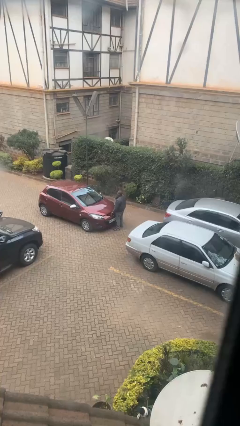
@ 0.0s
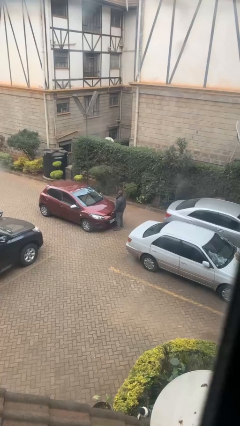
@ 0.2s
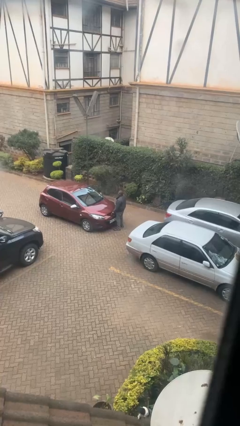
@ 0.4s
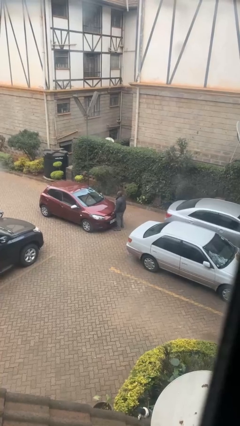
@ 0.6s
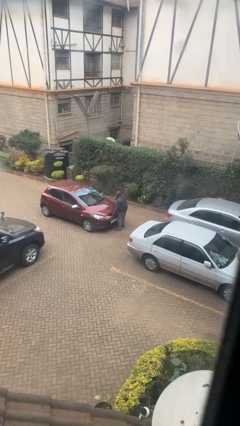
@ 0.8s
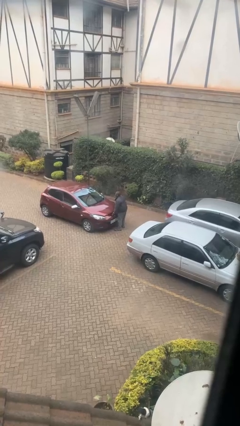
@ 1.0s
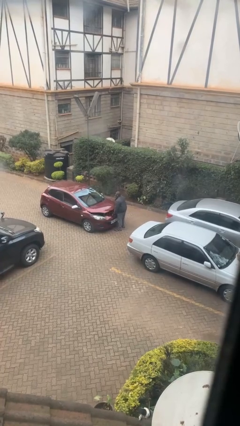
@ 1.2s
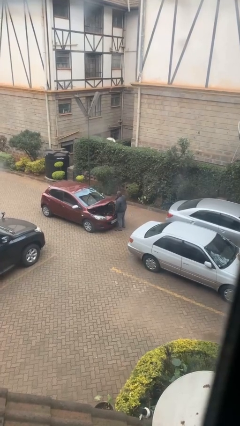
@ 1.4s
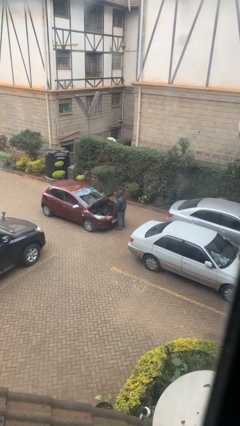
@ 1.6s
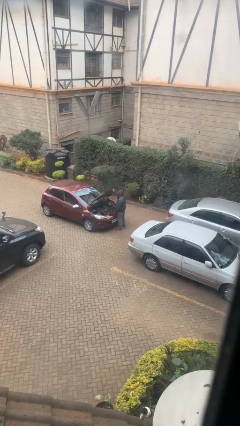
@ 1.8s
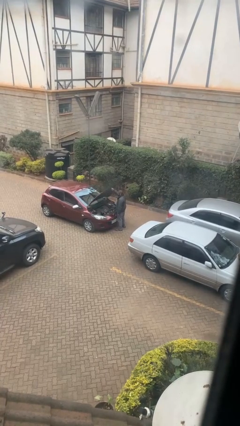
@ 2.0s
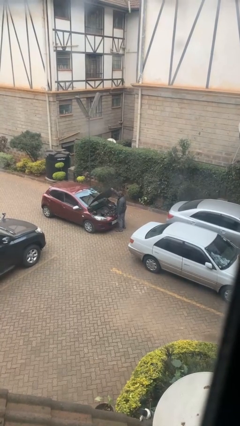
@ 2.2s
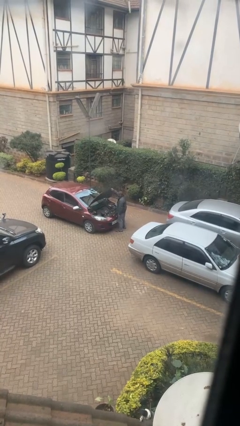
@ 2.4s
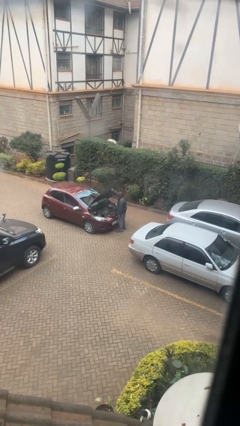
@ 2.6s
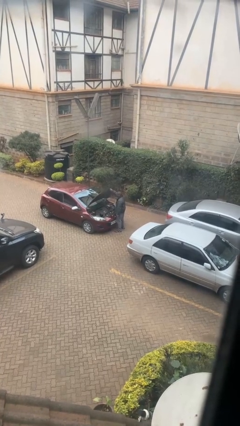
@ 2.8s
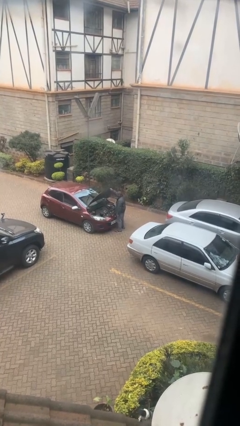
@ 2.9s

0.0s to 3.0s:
person opens car hood

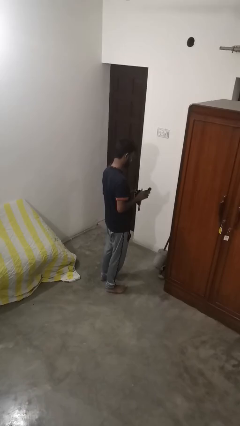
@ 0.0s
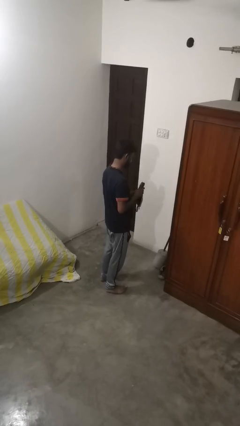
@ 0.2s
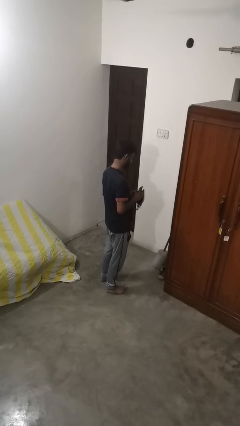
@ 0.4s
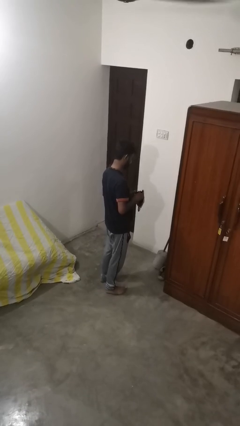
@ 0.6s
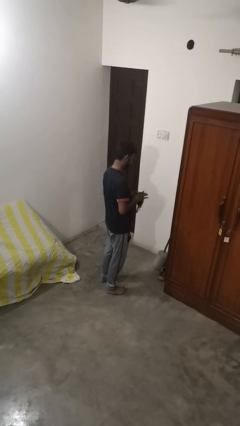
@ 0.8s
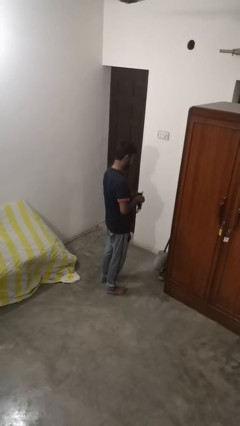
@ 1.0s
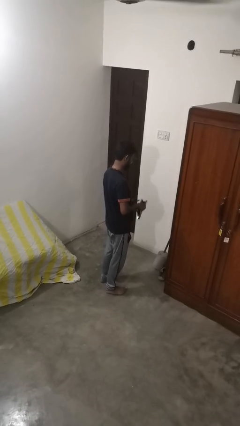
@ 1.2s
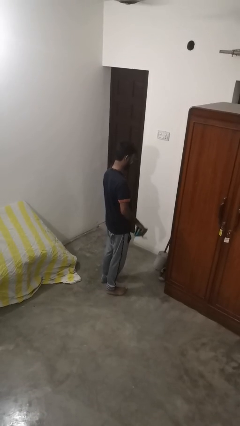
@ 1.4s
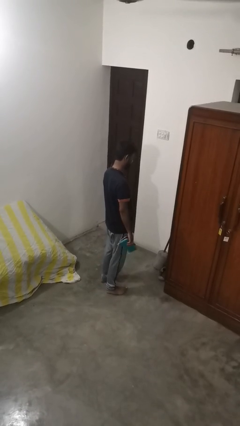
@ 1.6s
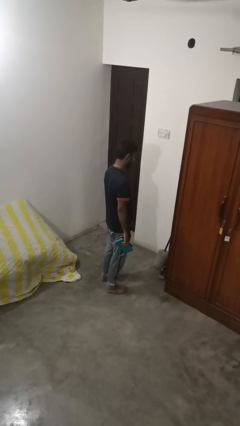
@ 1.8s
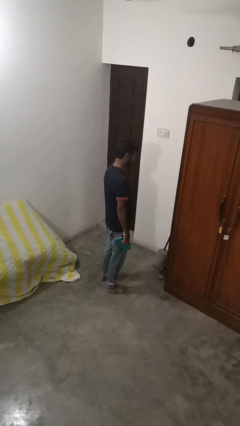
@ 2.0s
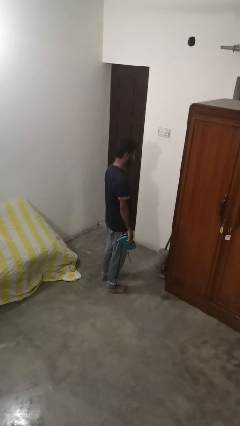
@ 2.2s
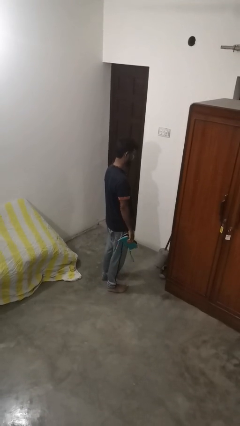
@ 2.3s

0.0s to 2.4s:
person puts object into purse

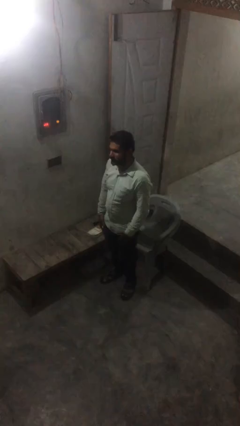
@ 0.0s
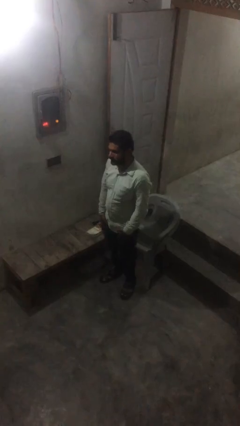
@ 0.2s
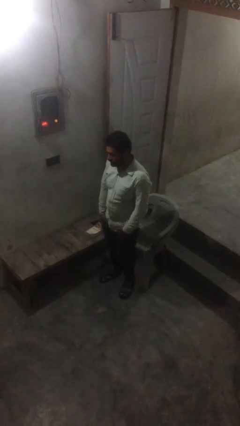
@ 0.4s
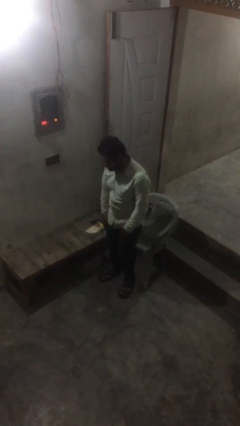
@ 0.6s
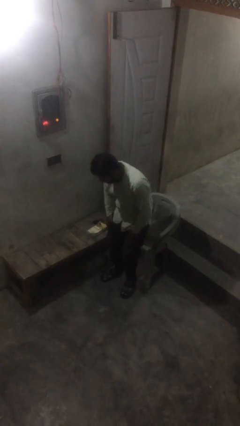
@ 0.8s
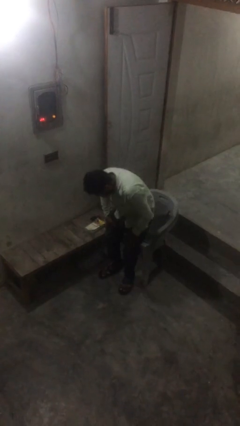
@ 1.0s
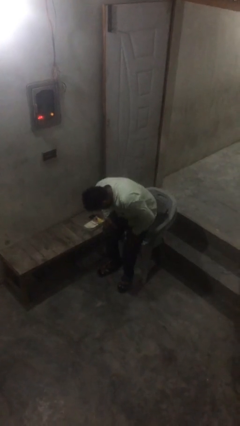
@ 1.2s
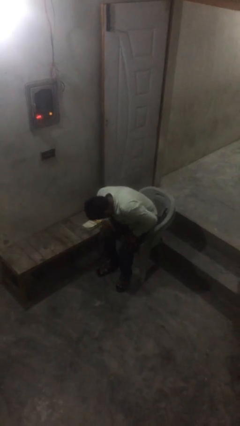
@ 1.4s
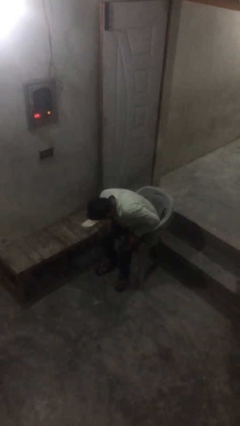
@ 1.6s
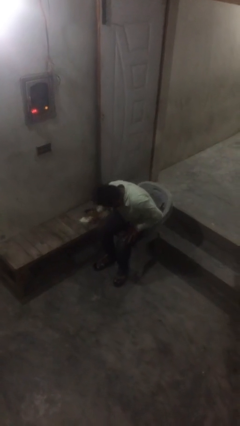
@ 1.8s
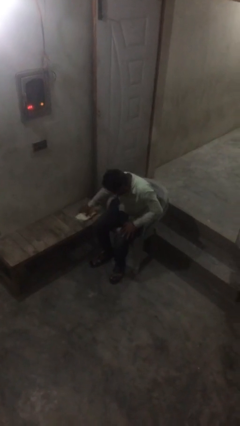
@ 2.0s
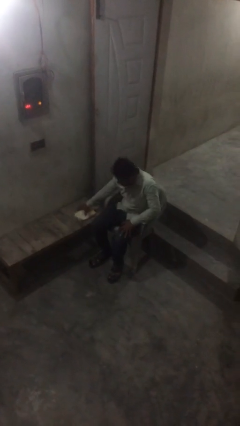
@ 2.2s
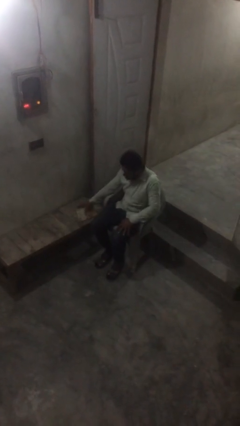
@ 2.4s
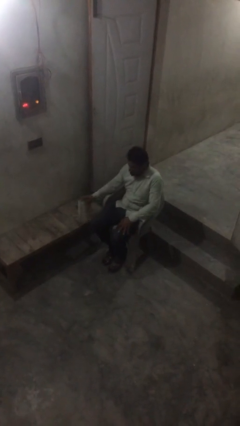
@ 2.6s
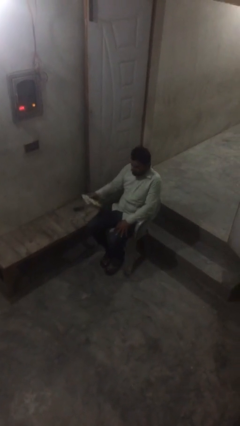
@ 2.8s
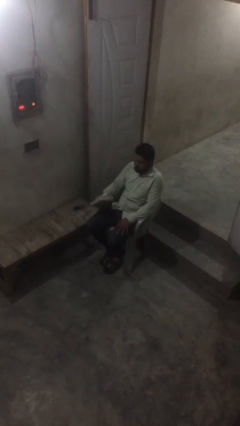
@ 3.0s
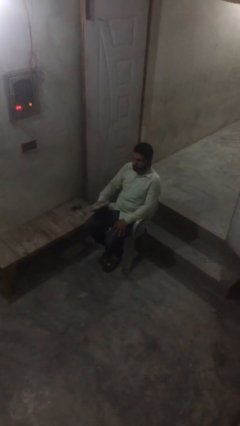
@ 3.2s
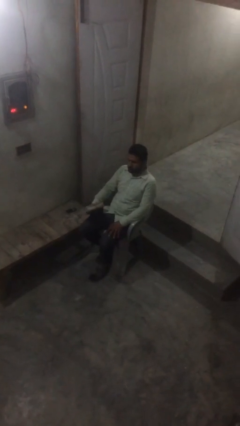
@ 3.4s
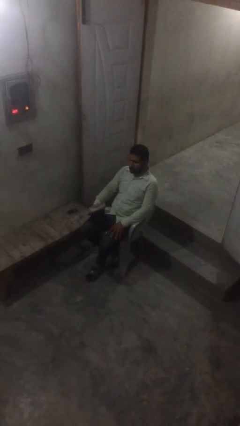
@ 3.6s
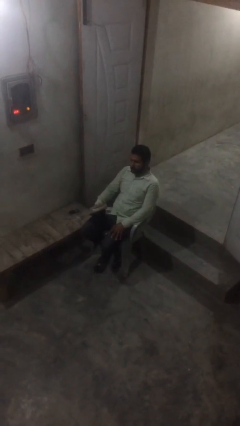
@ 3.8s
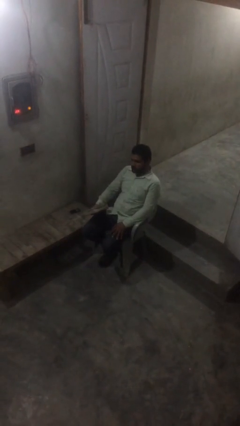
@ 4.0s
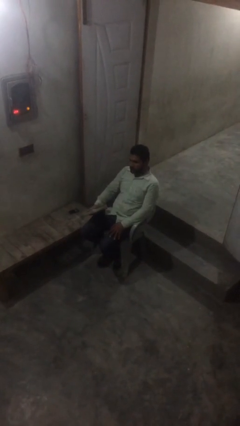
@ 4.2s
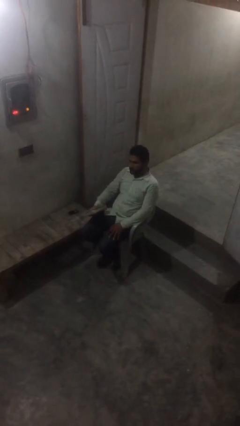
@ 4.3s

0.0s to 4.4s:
person sits down

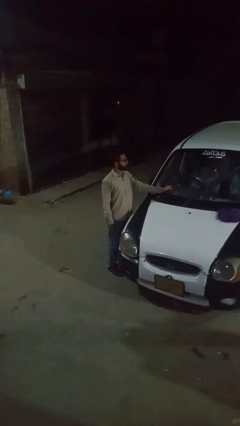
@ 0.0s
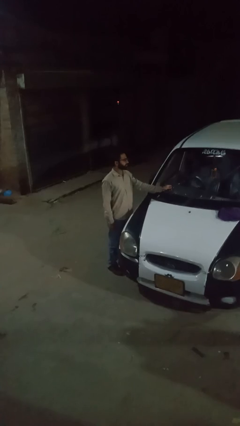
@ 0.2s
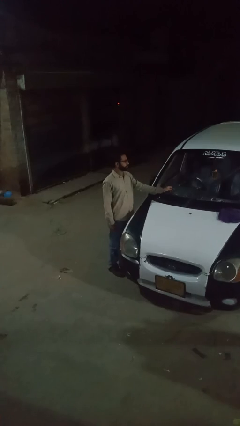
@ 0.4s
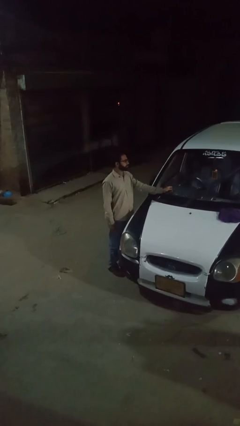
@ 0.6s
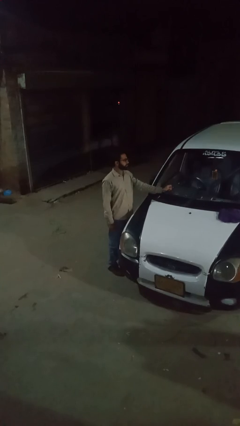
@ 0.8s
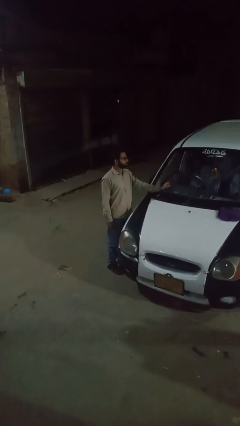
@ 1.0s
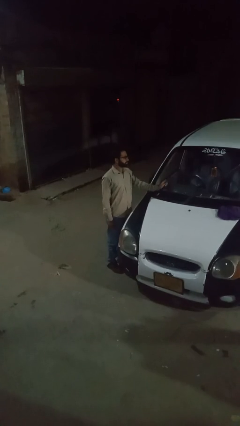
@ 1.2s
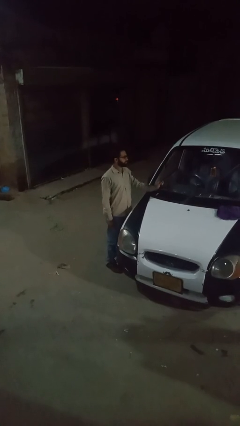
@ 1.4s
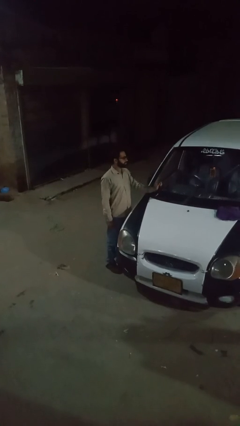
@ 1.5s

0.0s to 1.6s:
person flips up car wipers

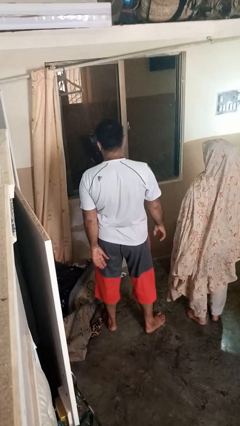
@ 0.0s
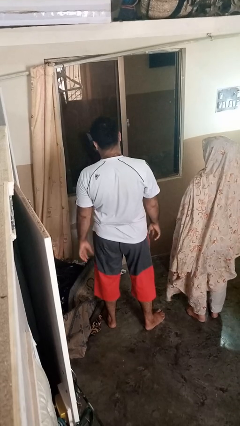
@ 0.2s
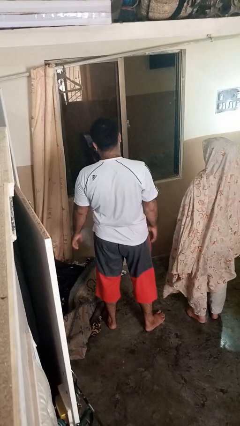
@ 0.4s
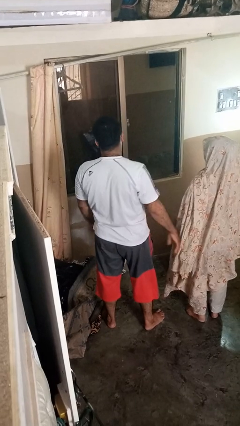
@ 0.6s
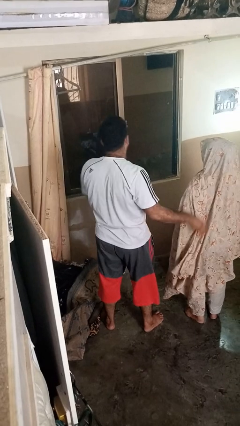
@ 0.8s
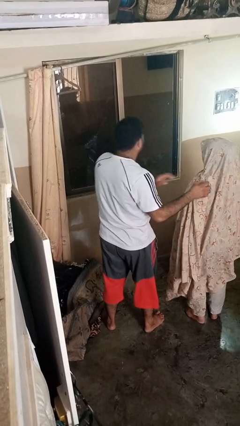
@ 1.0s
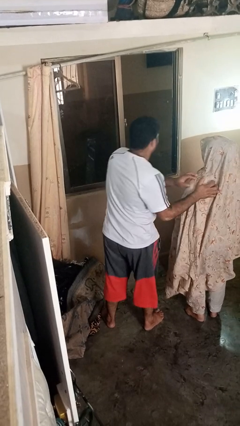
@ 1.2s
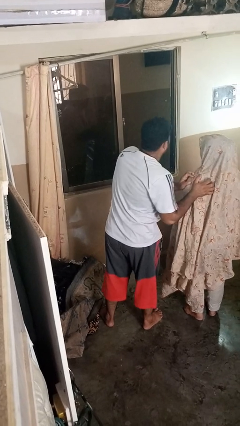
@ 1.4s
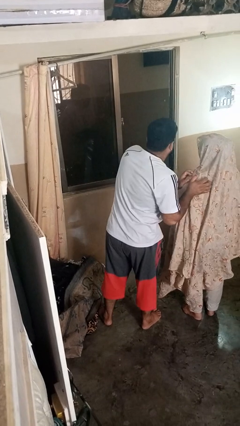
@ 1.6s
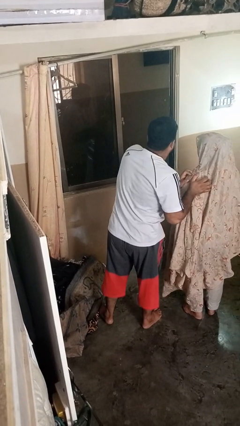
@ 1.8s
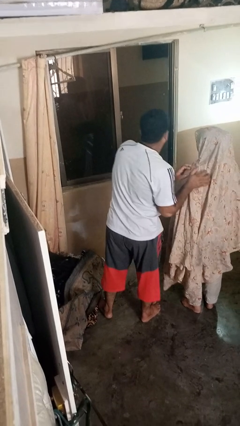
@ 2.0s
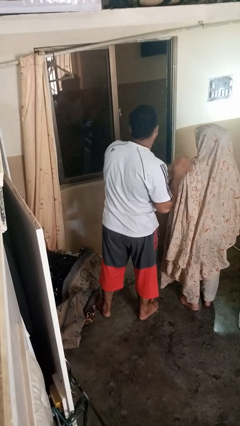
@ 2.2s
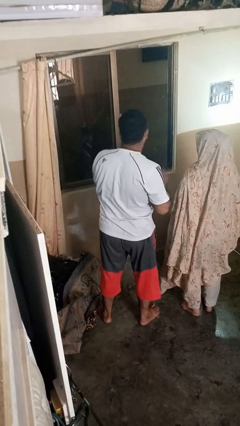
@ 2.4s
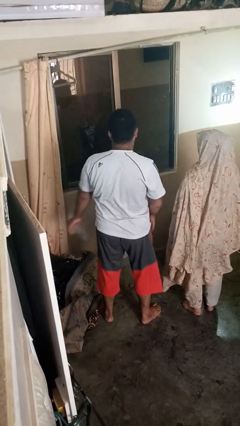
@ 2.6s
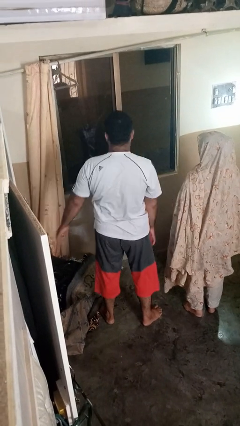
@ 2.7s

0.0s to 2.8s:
person shoves person

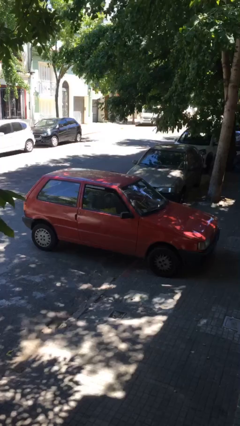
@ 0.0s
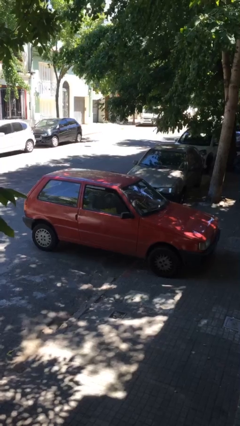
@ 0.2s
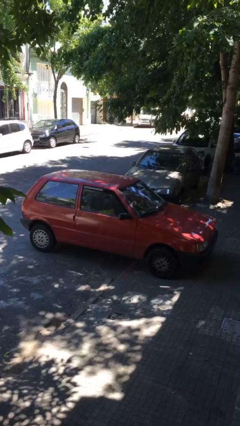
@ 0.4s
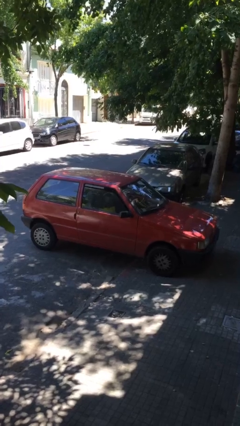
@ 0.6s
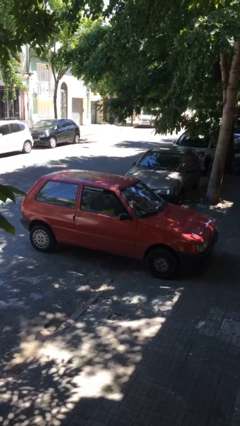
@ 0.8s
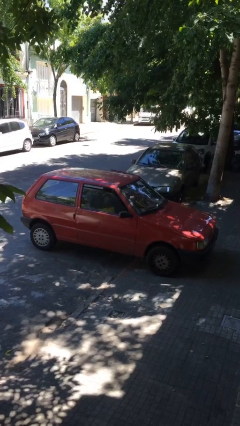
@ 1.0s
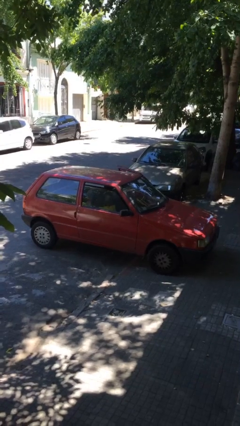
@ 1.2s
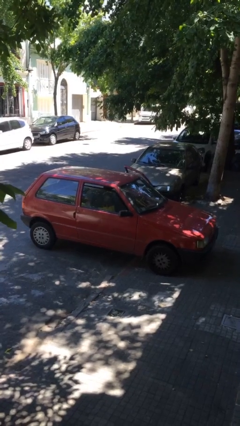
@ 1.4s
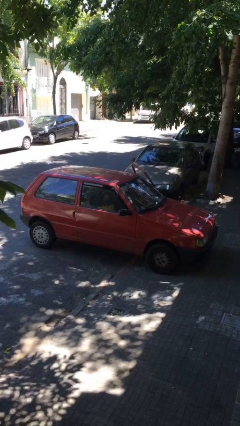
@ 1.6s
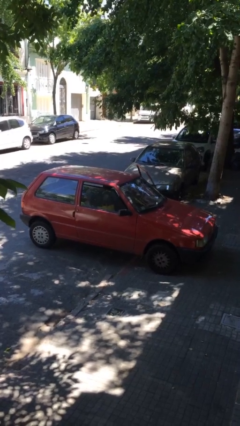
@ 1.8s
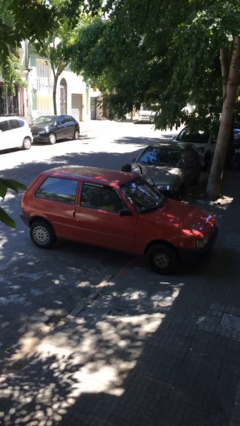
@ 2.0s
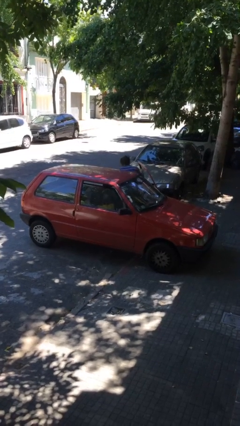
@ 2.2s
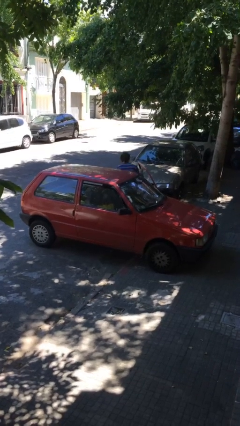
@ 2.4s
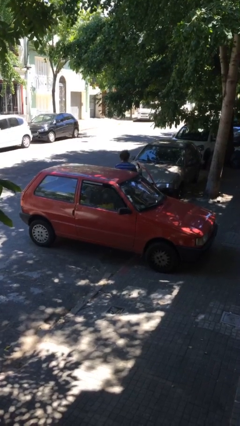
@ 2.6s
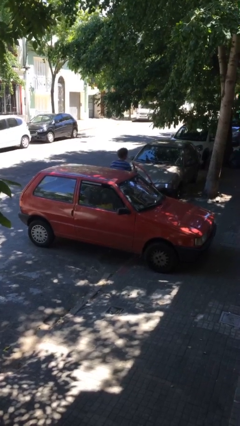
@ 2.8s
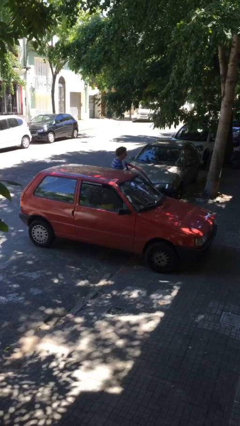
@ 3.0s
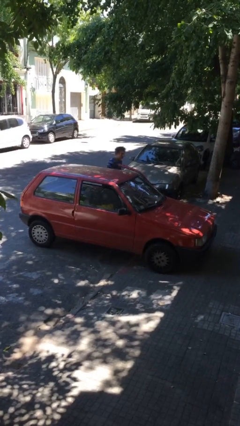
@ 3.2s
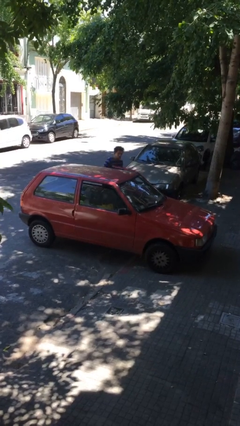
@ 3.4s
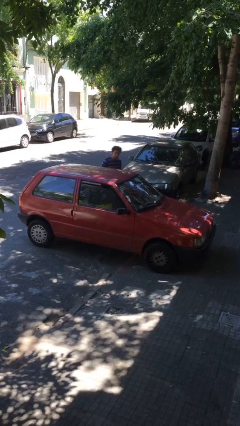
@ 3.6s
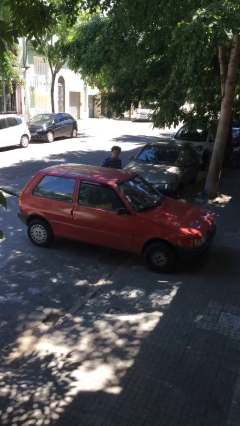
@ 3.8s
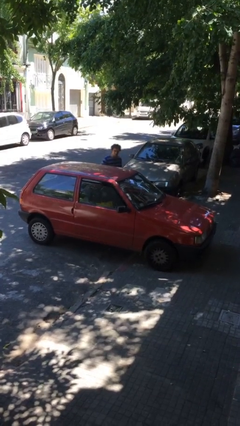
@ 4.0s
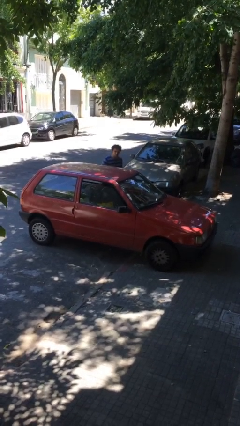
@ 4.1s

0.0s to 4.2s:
car drops off person
